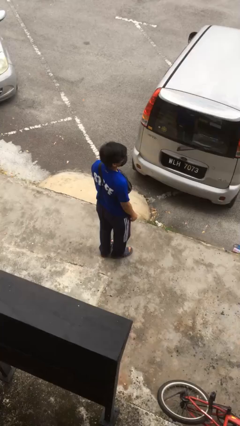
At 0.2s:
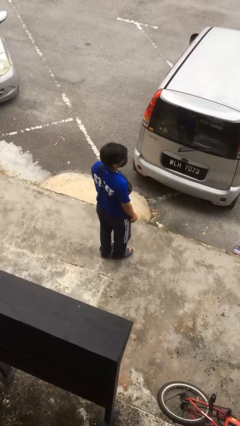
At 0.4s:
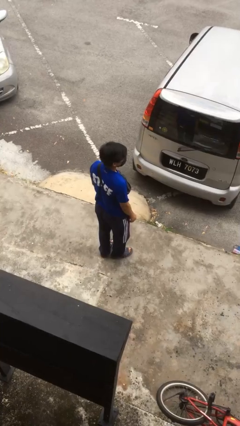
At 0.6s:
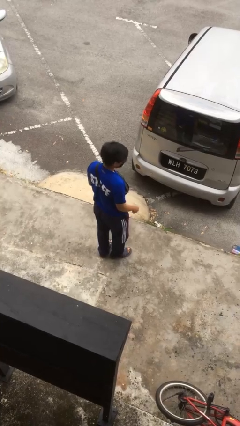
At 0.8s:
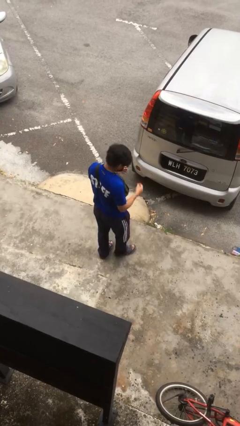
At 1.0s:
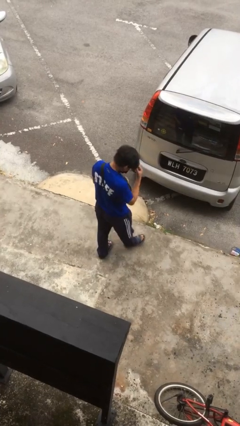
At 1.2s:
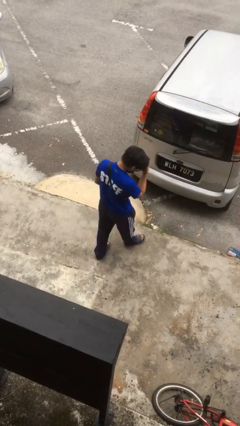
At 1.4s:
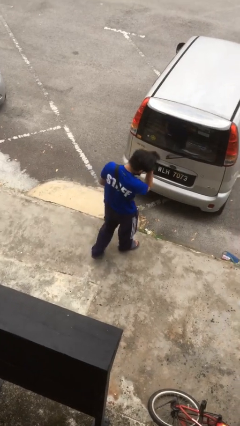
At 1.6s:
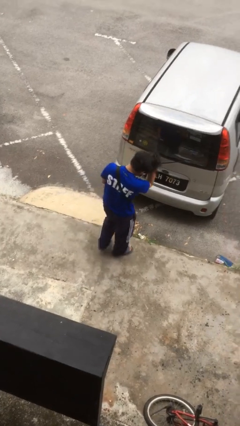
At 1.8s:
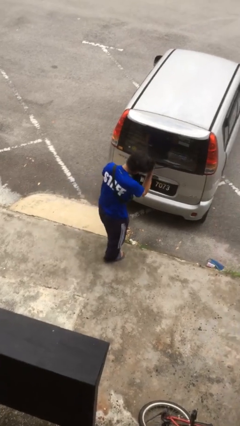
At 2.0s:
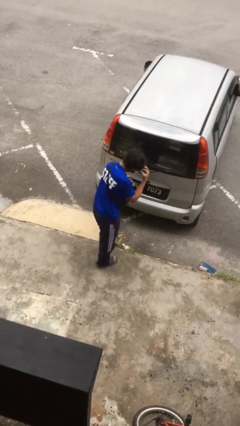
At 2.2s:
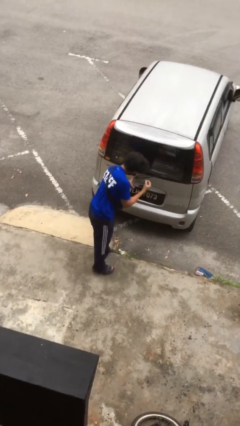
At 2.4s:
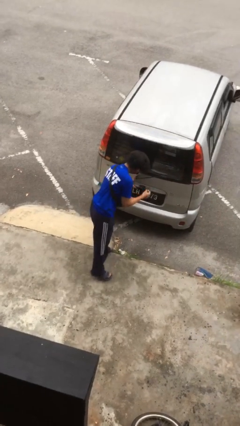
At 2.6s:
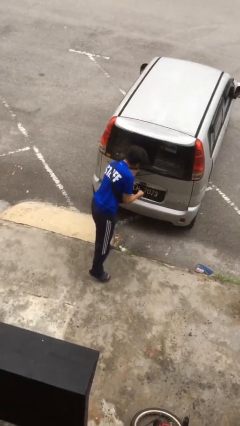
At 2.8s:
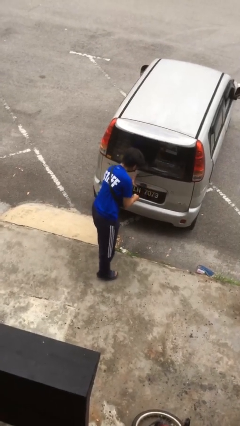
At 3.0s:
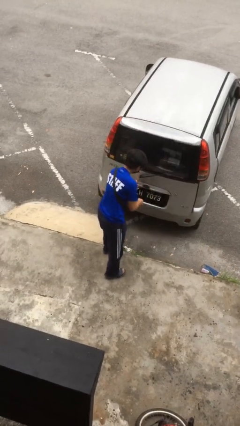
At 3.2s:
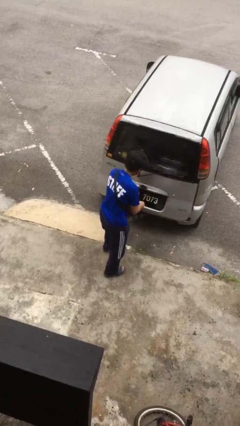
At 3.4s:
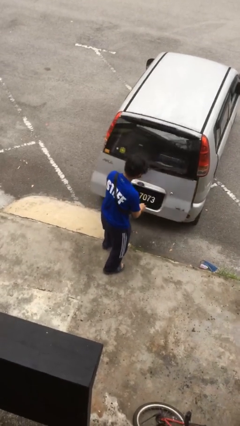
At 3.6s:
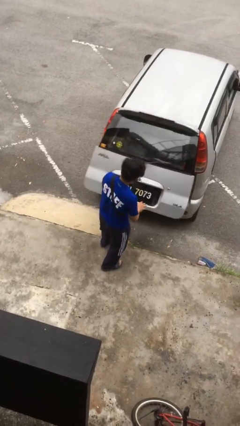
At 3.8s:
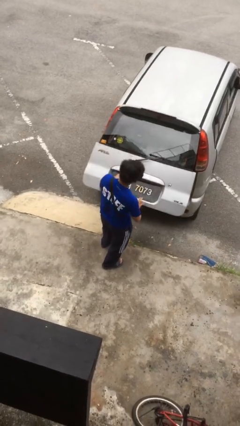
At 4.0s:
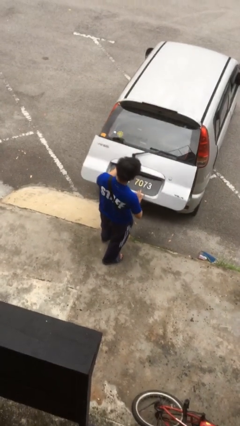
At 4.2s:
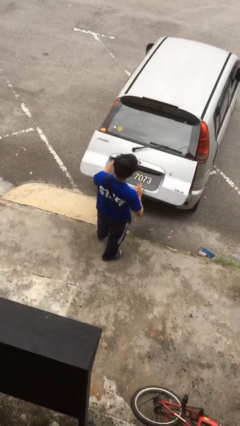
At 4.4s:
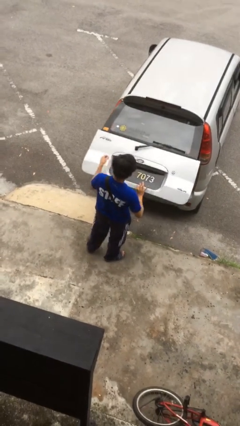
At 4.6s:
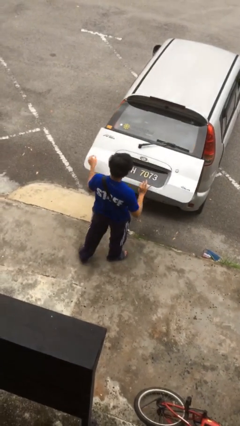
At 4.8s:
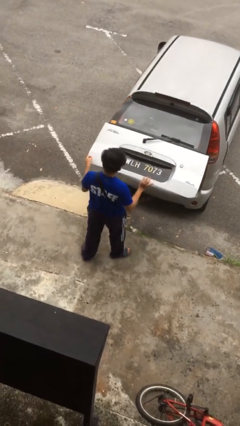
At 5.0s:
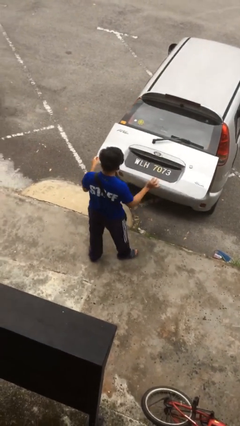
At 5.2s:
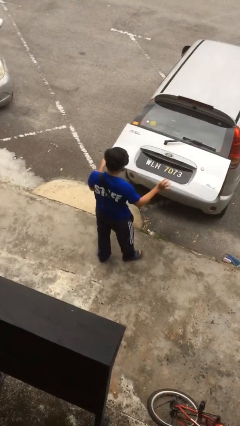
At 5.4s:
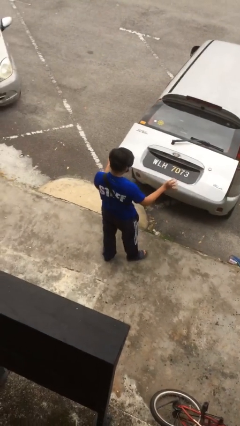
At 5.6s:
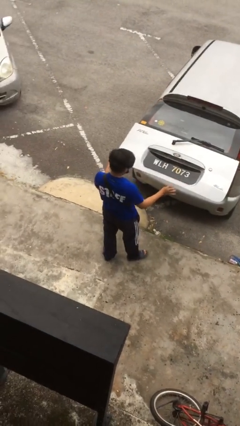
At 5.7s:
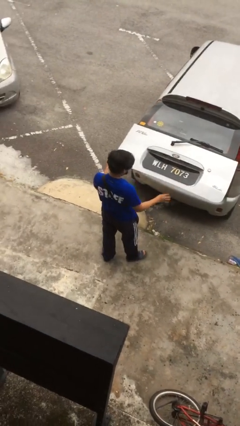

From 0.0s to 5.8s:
person opens car trunk

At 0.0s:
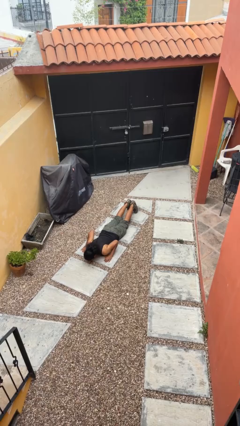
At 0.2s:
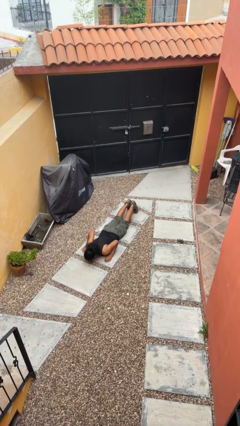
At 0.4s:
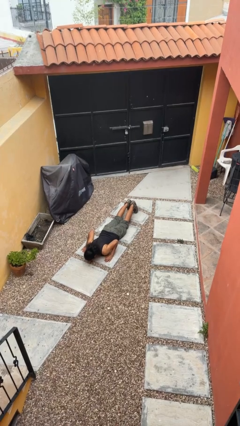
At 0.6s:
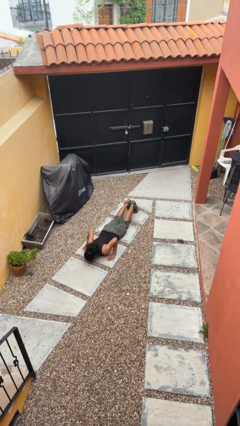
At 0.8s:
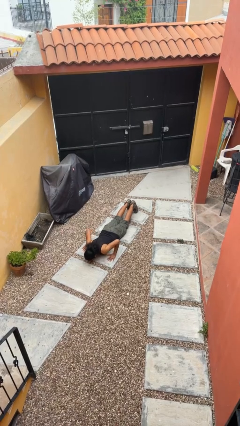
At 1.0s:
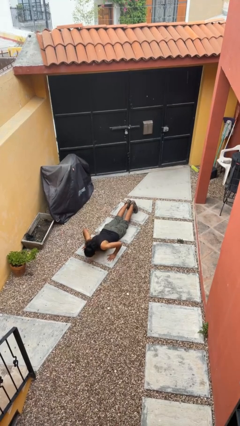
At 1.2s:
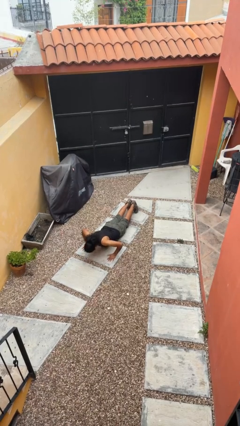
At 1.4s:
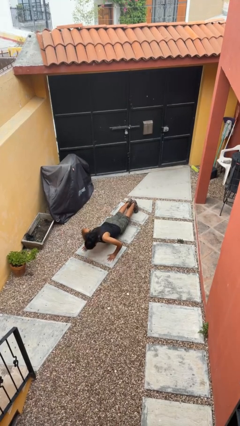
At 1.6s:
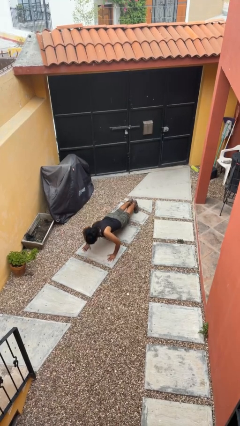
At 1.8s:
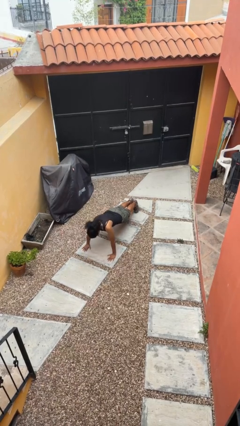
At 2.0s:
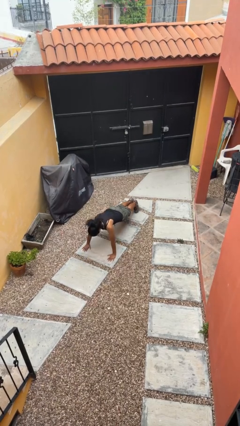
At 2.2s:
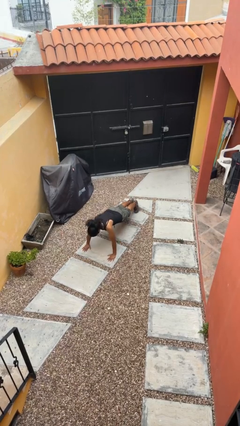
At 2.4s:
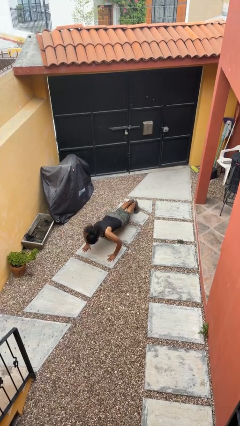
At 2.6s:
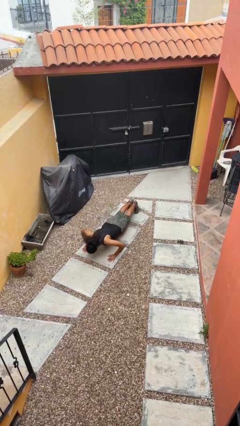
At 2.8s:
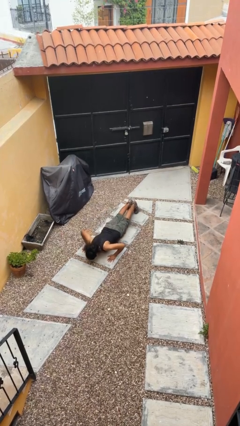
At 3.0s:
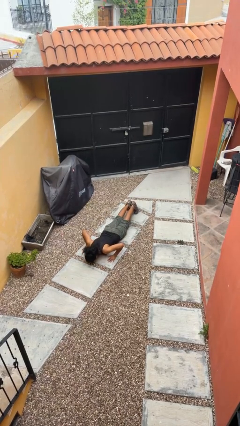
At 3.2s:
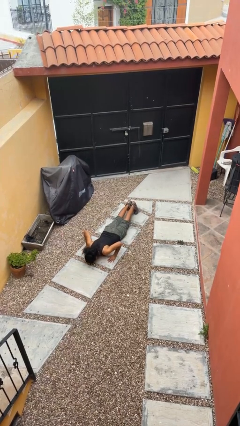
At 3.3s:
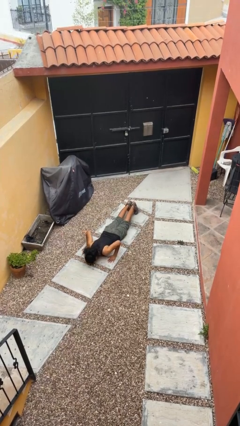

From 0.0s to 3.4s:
person exercises with pushup

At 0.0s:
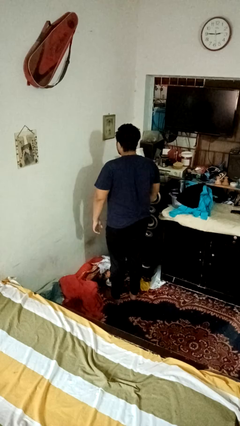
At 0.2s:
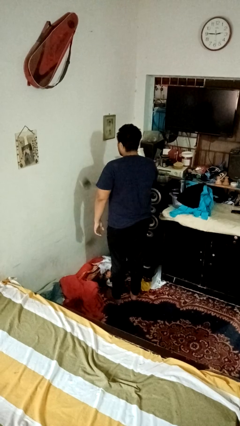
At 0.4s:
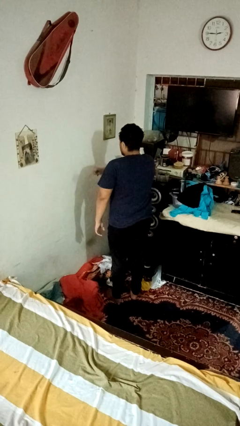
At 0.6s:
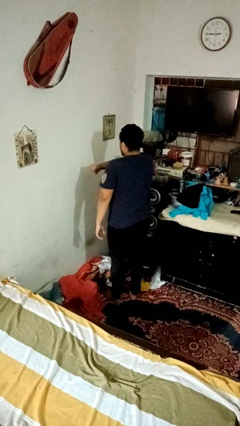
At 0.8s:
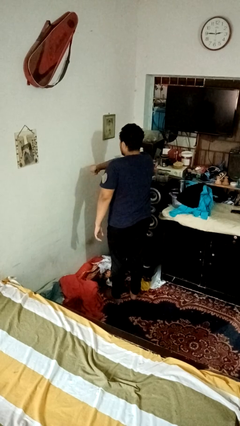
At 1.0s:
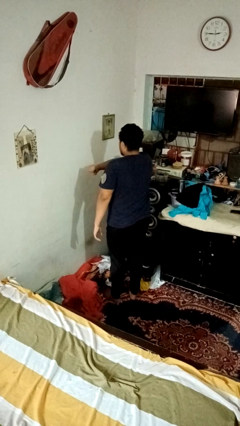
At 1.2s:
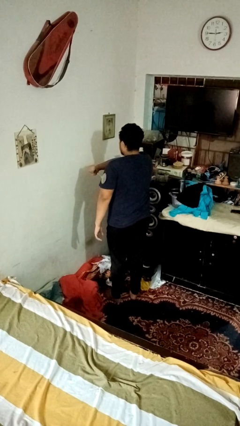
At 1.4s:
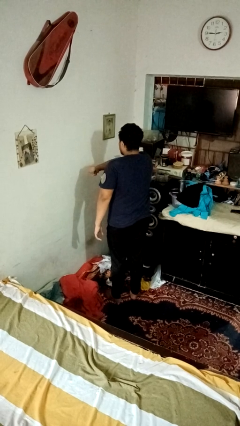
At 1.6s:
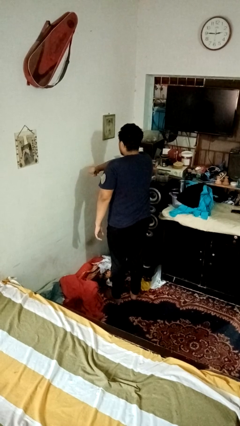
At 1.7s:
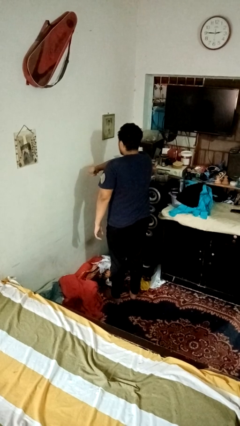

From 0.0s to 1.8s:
person swats bug

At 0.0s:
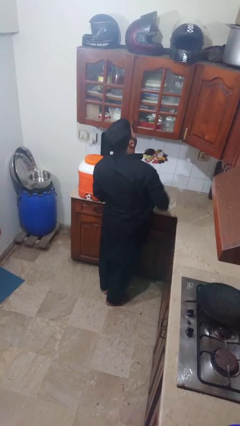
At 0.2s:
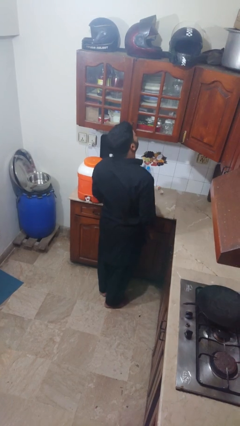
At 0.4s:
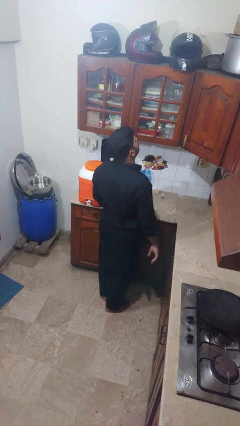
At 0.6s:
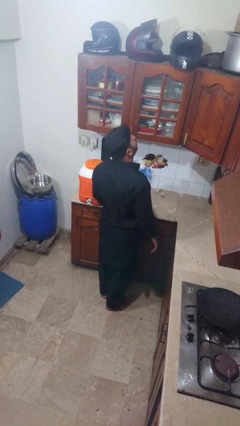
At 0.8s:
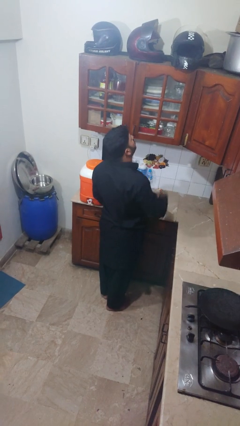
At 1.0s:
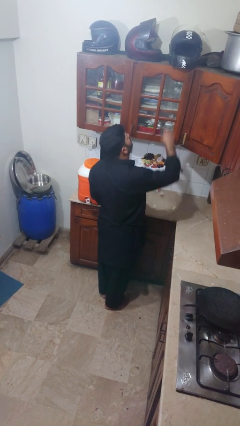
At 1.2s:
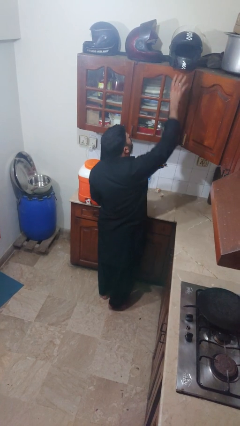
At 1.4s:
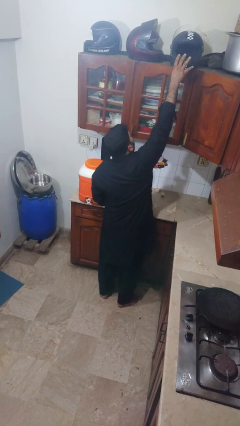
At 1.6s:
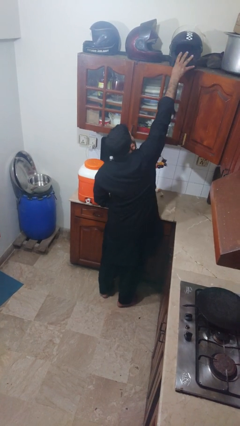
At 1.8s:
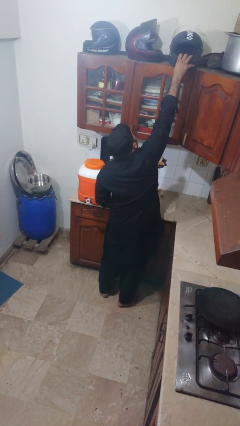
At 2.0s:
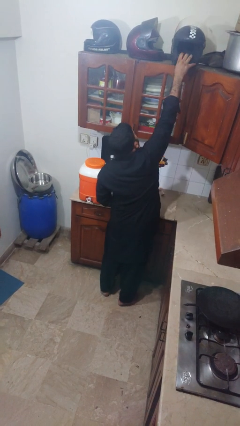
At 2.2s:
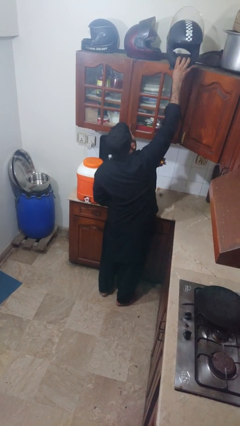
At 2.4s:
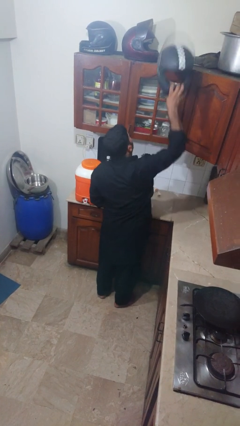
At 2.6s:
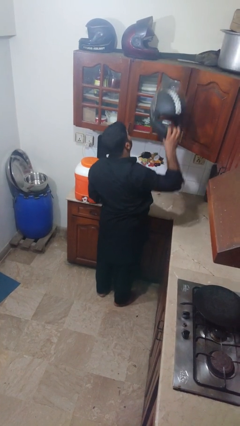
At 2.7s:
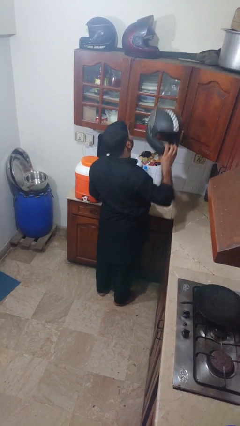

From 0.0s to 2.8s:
person picks up object from shelf

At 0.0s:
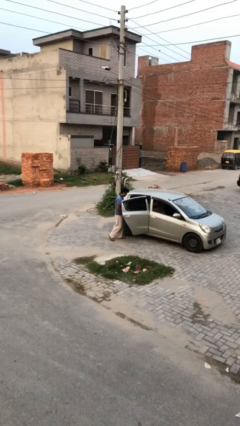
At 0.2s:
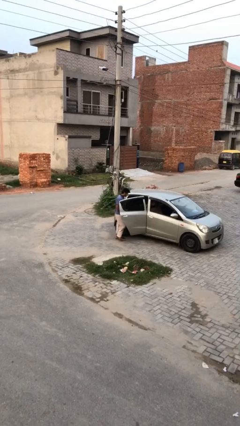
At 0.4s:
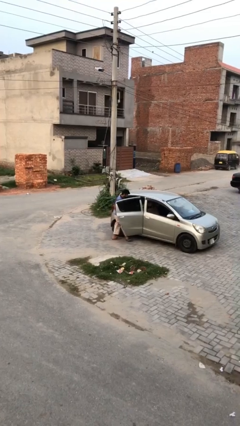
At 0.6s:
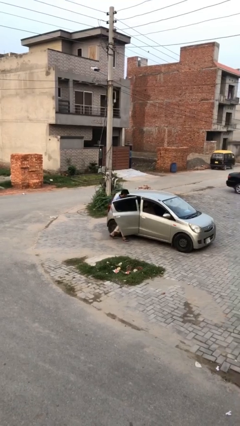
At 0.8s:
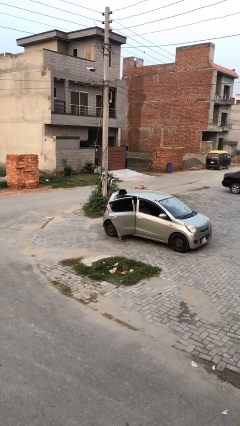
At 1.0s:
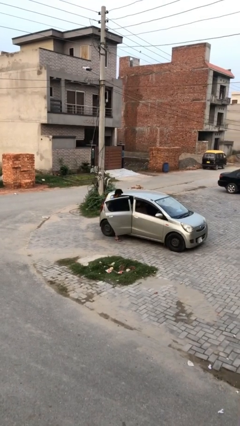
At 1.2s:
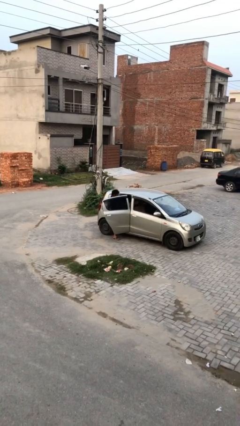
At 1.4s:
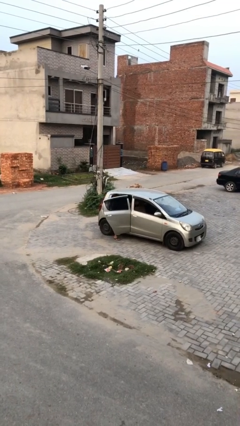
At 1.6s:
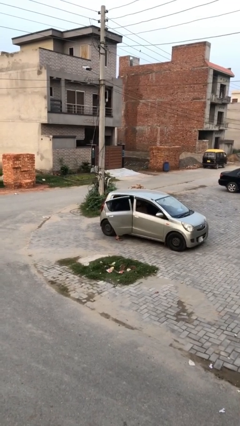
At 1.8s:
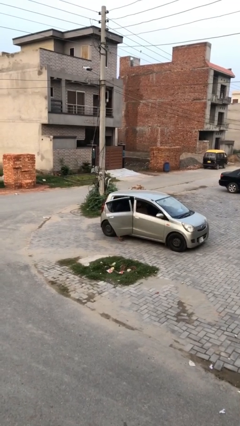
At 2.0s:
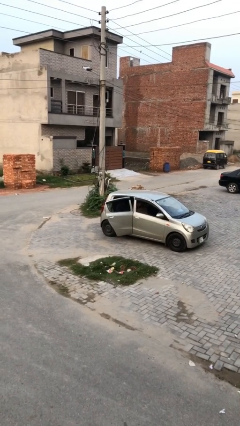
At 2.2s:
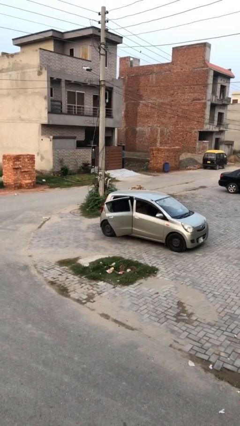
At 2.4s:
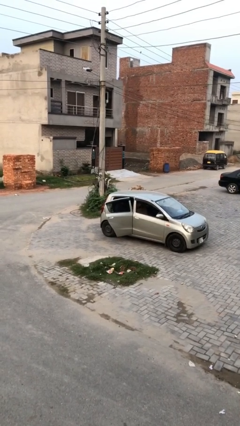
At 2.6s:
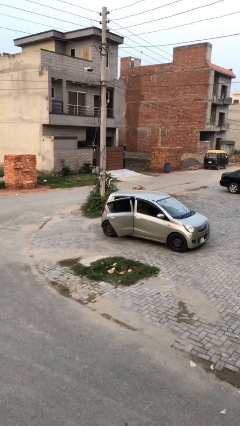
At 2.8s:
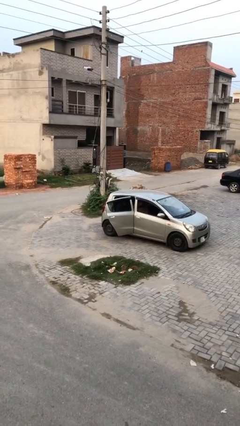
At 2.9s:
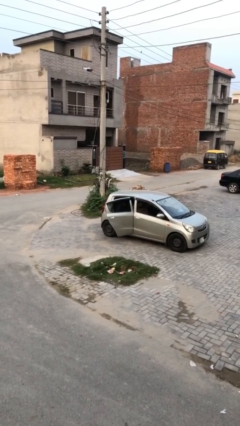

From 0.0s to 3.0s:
person enters car

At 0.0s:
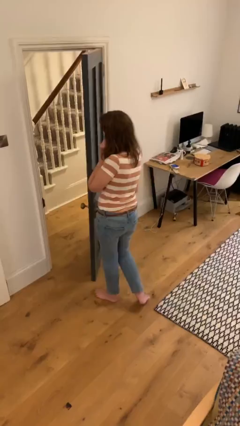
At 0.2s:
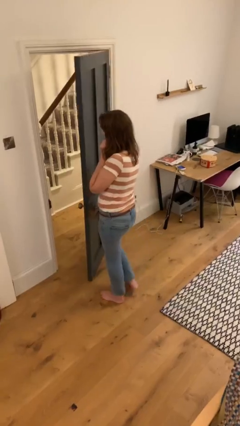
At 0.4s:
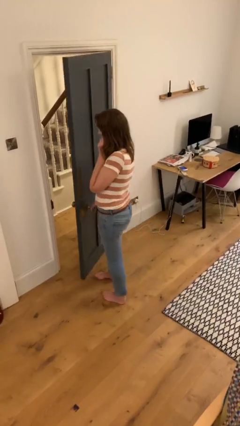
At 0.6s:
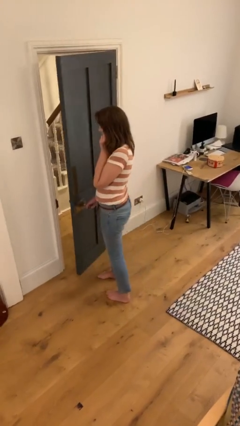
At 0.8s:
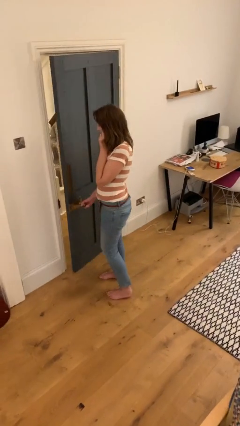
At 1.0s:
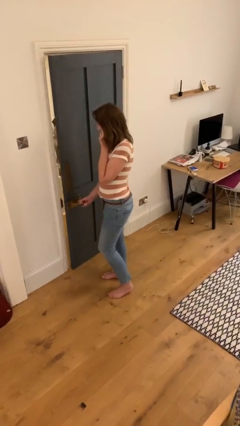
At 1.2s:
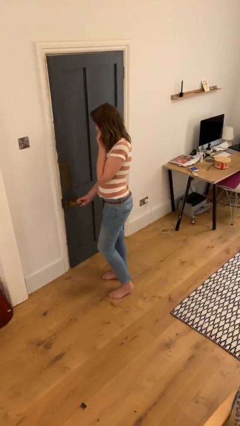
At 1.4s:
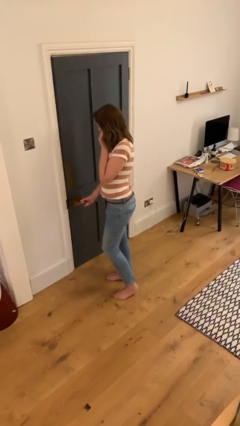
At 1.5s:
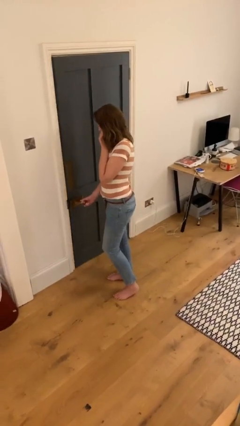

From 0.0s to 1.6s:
person closes facility door
